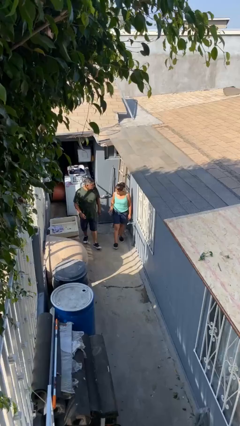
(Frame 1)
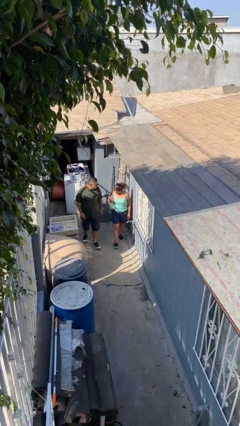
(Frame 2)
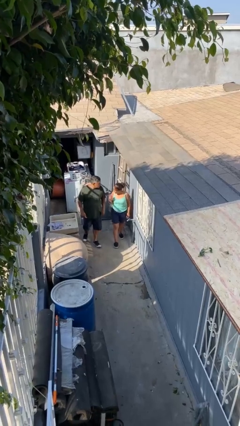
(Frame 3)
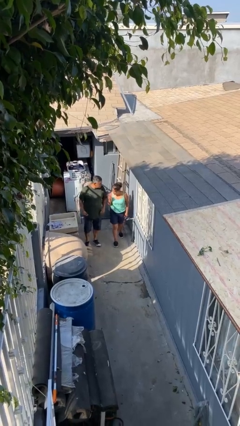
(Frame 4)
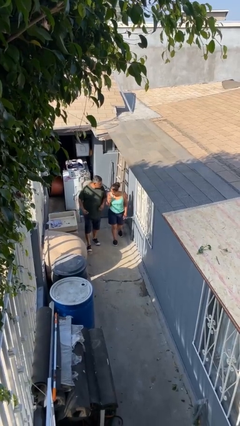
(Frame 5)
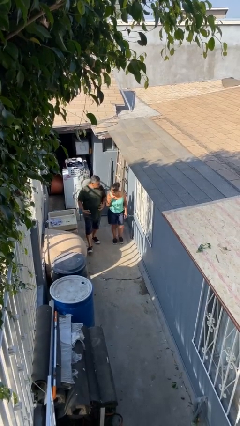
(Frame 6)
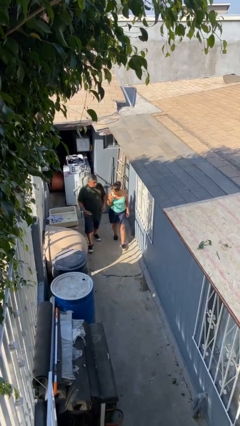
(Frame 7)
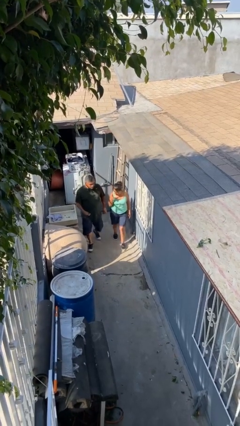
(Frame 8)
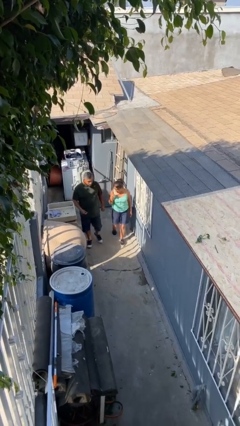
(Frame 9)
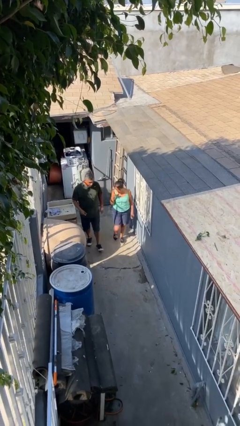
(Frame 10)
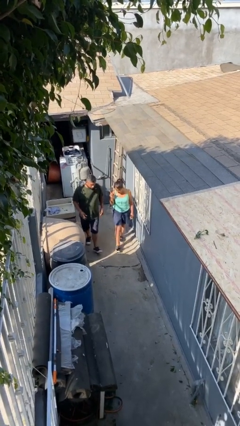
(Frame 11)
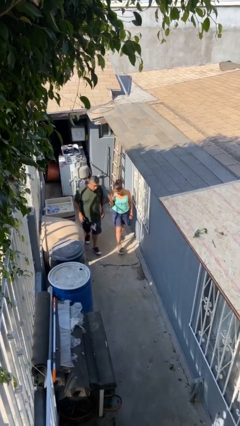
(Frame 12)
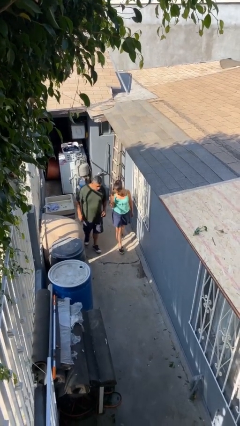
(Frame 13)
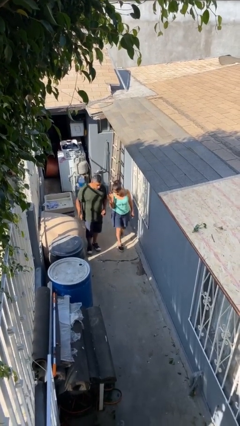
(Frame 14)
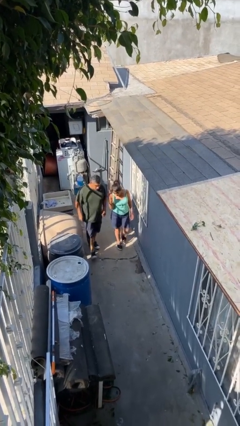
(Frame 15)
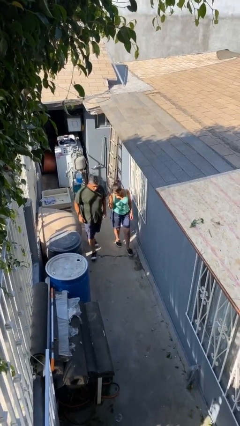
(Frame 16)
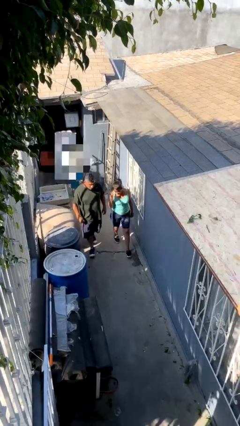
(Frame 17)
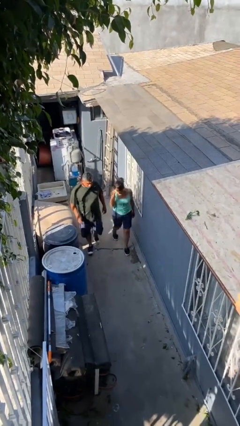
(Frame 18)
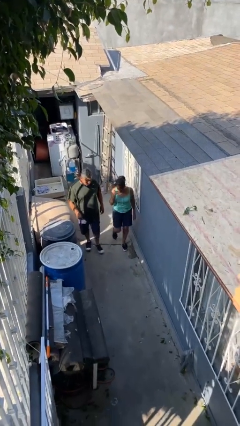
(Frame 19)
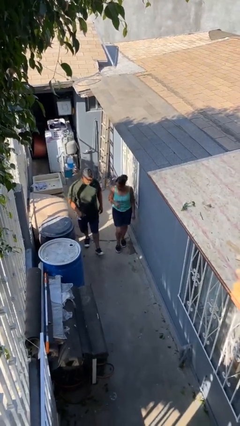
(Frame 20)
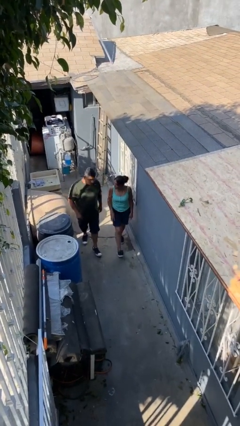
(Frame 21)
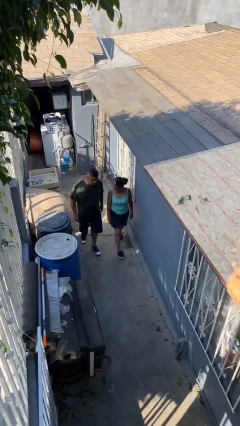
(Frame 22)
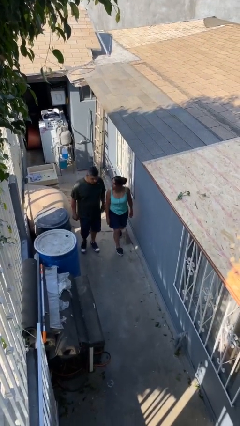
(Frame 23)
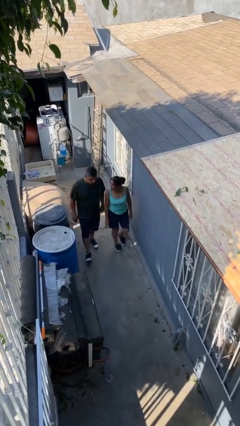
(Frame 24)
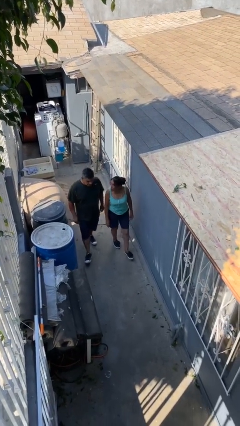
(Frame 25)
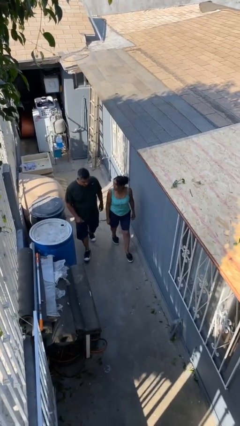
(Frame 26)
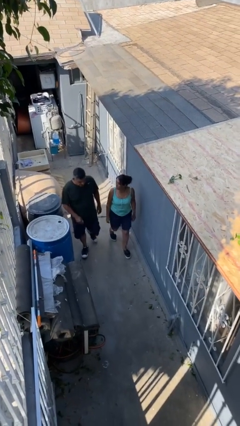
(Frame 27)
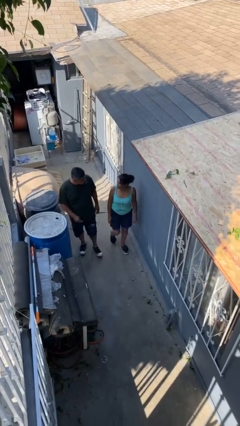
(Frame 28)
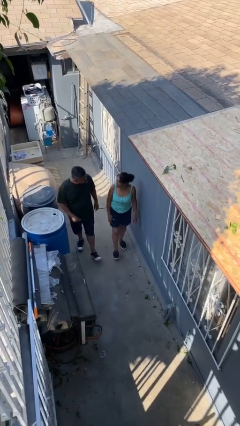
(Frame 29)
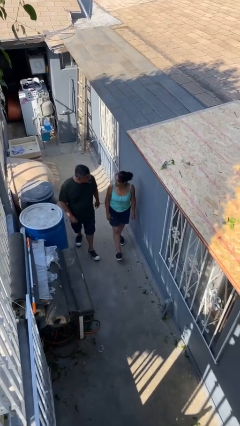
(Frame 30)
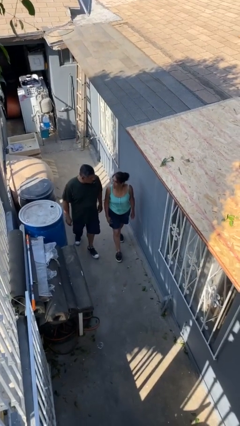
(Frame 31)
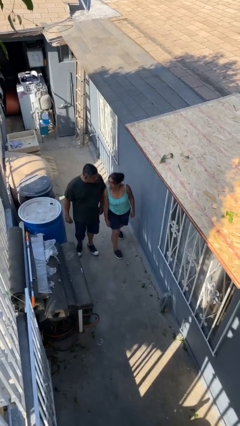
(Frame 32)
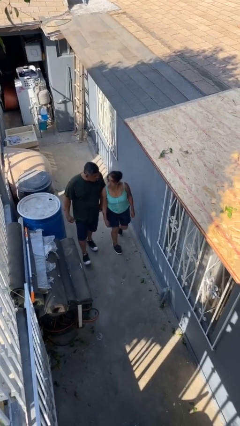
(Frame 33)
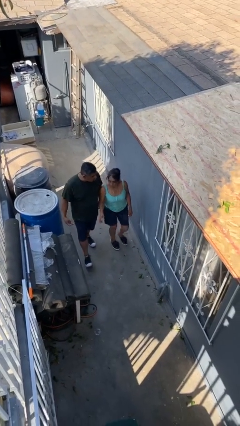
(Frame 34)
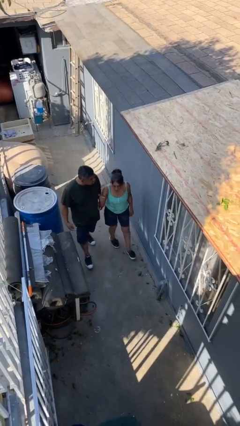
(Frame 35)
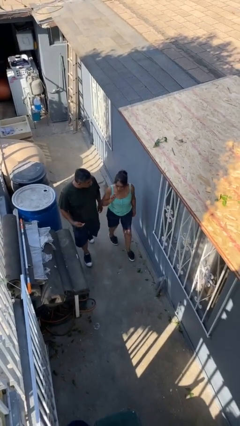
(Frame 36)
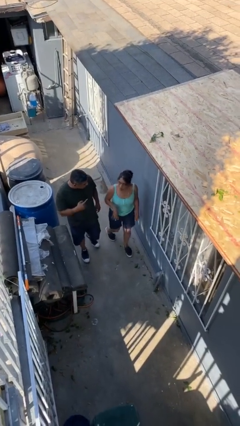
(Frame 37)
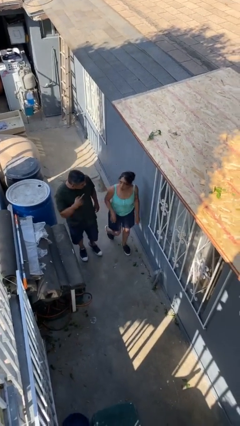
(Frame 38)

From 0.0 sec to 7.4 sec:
person talks to person

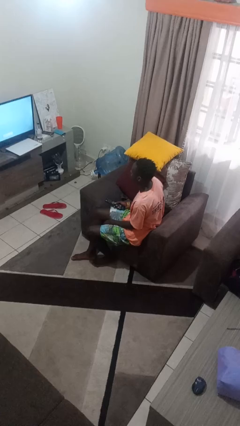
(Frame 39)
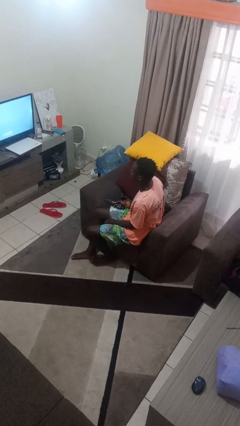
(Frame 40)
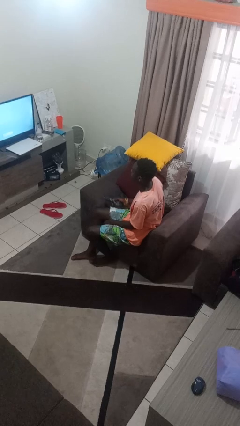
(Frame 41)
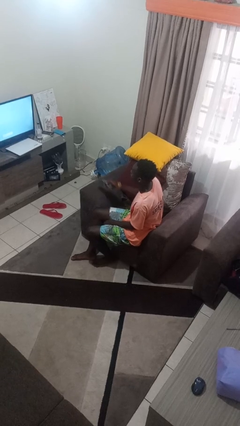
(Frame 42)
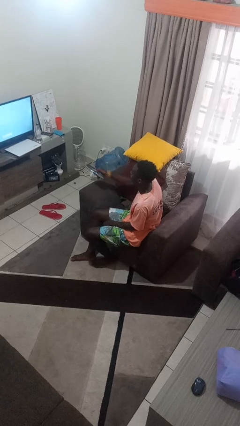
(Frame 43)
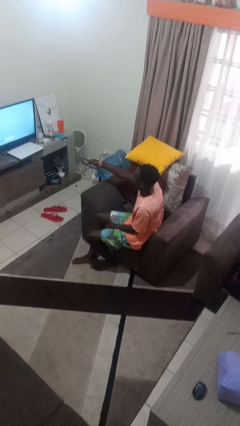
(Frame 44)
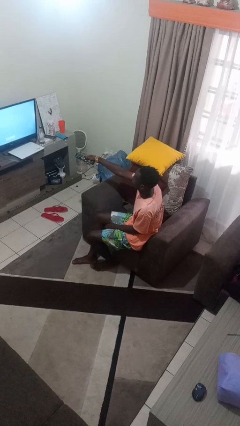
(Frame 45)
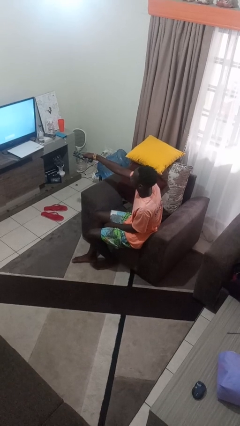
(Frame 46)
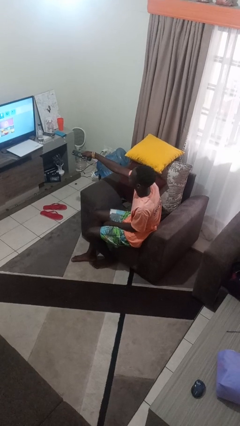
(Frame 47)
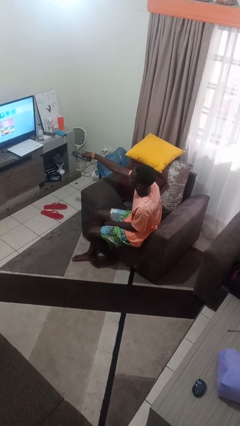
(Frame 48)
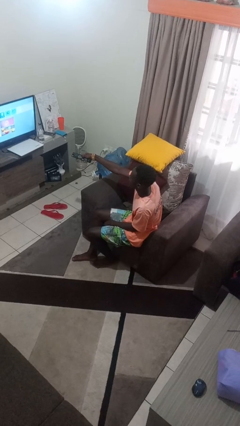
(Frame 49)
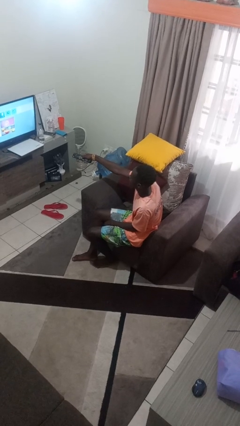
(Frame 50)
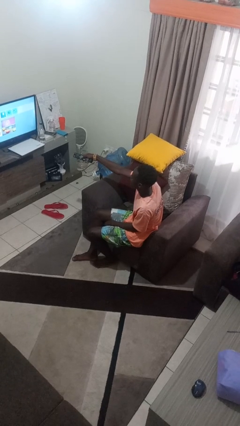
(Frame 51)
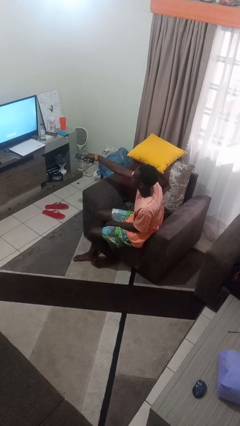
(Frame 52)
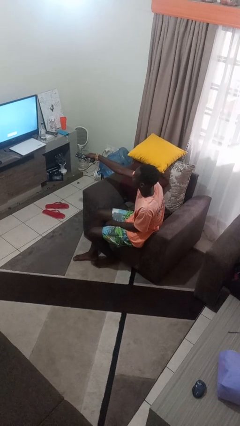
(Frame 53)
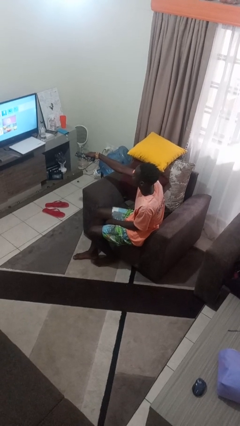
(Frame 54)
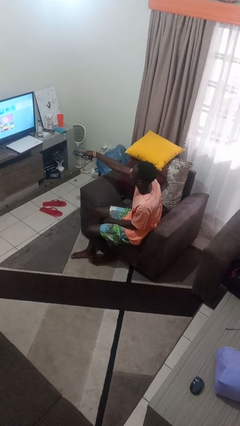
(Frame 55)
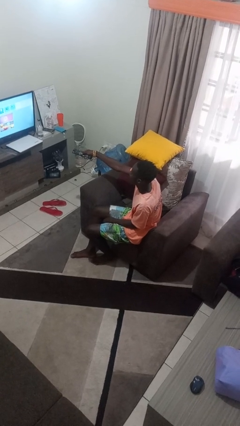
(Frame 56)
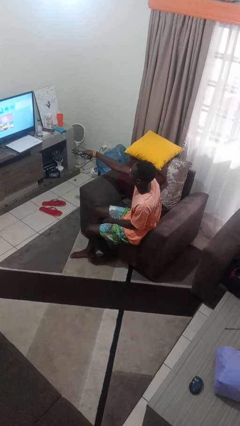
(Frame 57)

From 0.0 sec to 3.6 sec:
person uses television remote

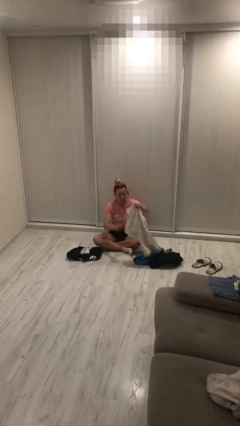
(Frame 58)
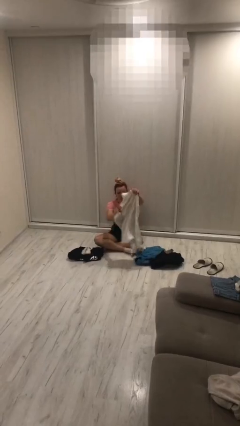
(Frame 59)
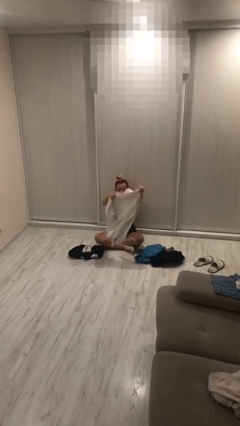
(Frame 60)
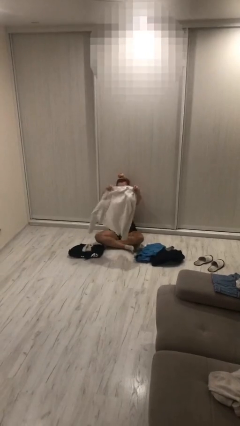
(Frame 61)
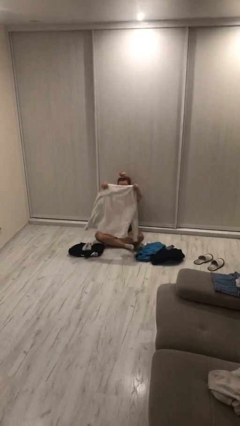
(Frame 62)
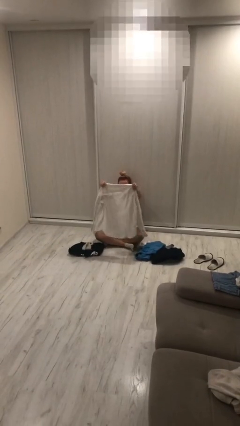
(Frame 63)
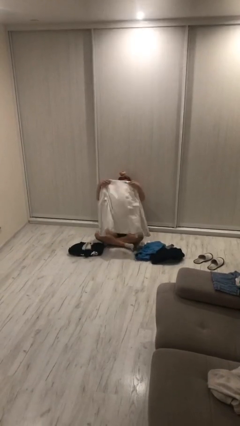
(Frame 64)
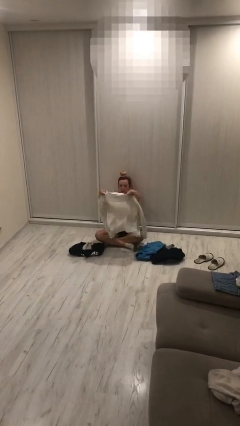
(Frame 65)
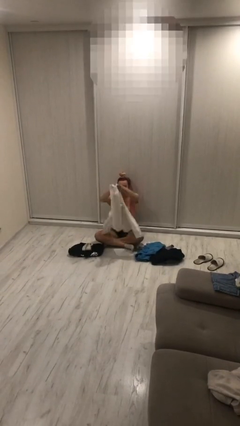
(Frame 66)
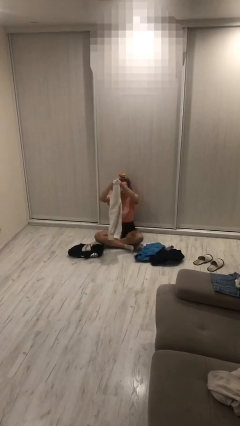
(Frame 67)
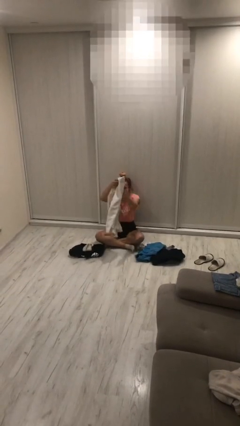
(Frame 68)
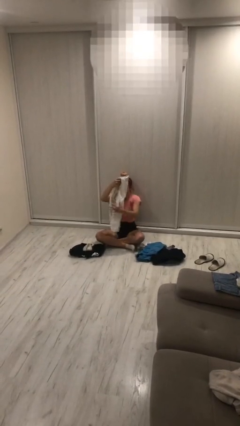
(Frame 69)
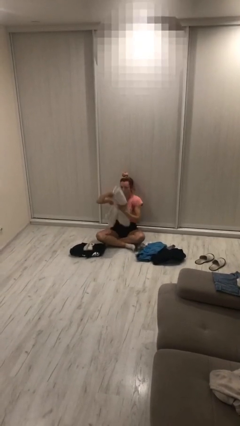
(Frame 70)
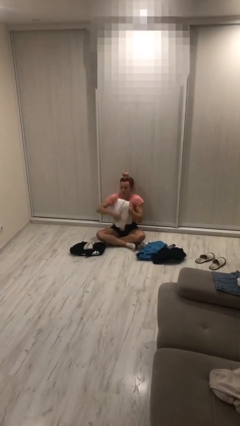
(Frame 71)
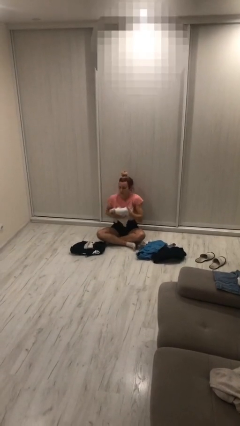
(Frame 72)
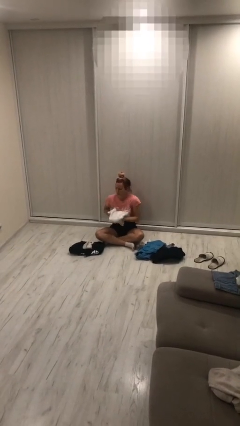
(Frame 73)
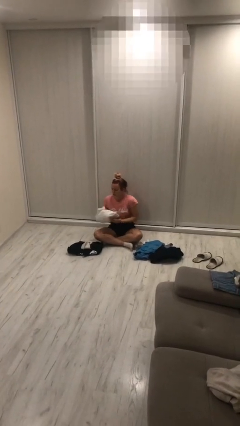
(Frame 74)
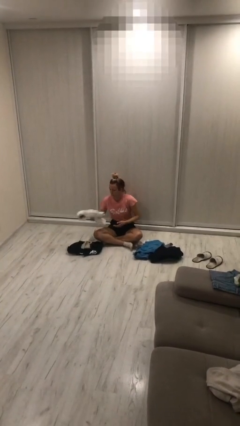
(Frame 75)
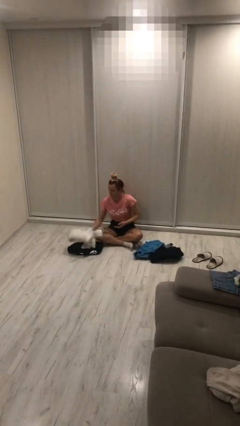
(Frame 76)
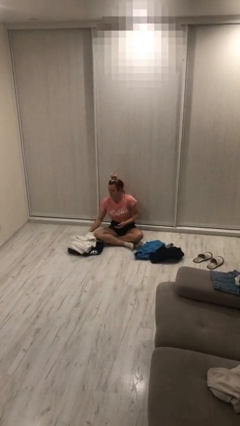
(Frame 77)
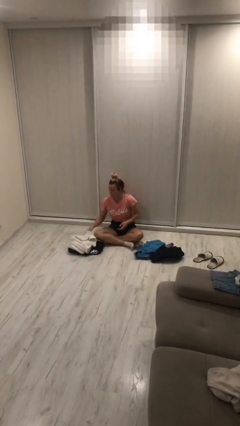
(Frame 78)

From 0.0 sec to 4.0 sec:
person folds shirt

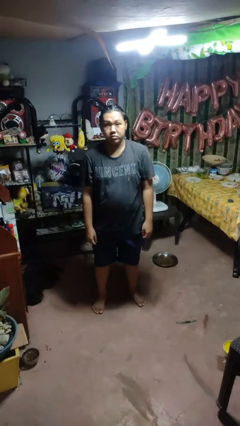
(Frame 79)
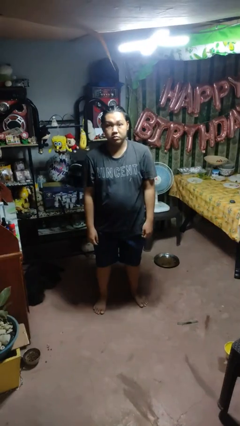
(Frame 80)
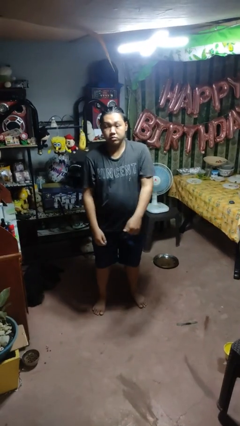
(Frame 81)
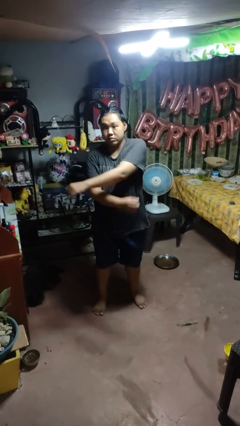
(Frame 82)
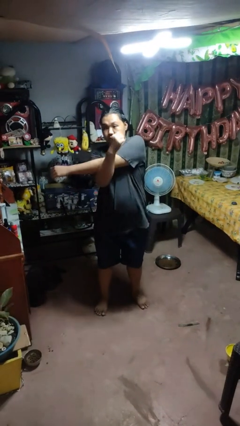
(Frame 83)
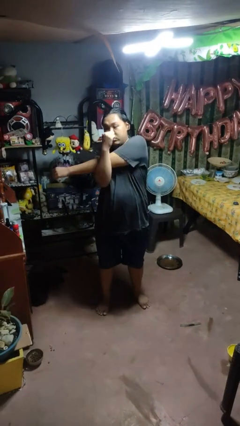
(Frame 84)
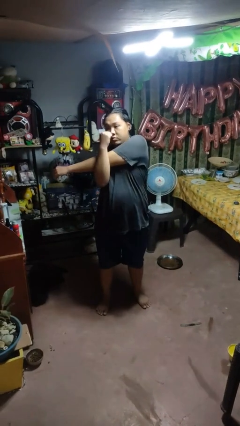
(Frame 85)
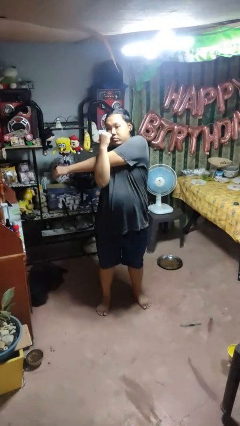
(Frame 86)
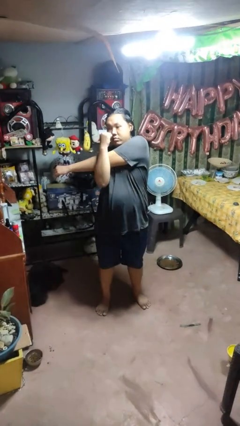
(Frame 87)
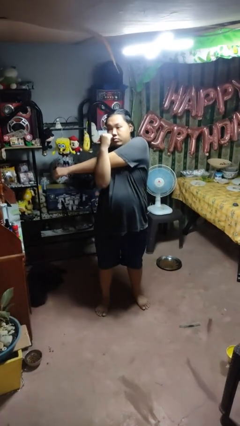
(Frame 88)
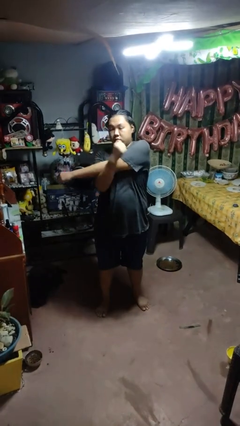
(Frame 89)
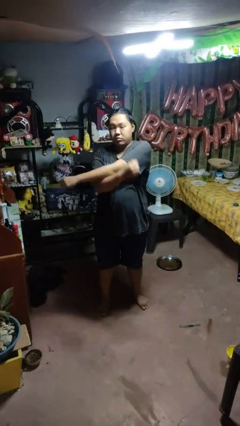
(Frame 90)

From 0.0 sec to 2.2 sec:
person crosses arms

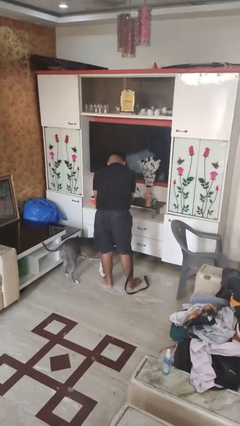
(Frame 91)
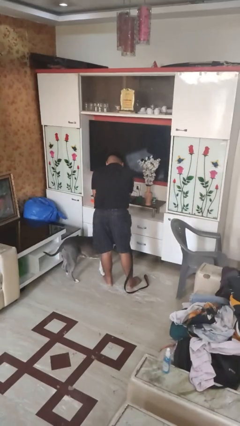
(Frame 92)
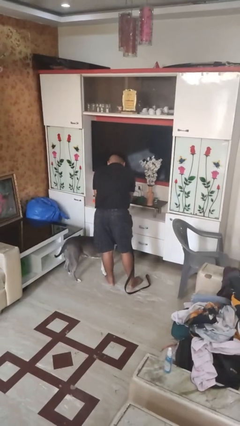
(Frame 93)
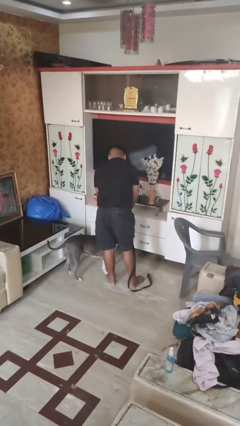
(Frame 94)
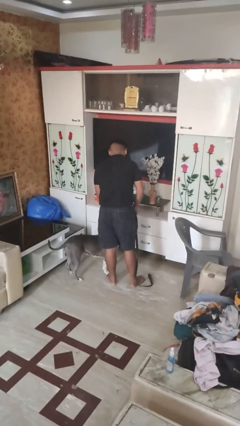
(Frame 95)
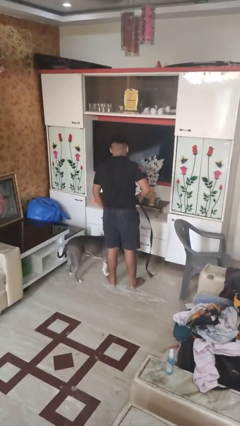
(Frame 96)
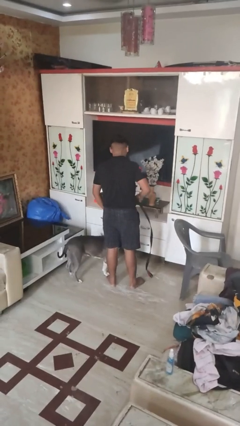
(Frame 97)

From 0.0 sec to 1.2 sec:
person attaches leash to dog
